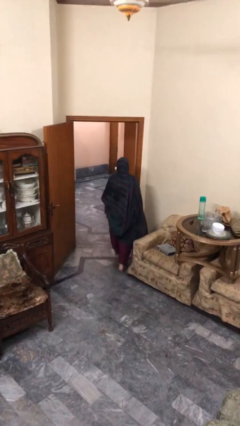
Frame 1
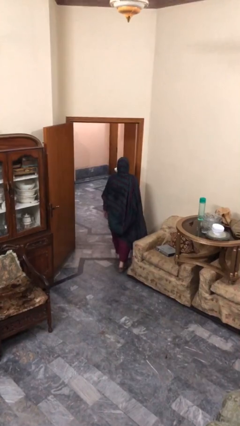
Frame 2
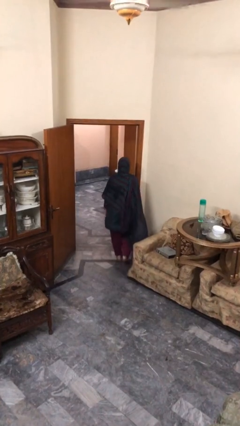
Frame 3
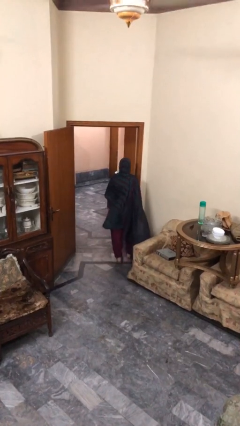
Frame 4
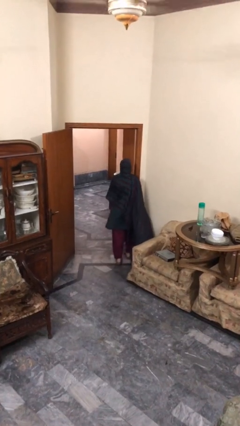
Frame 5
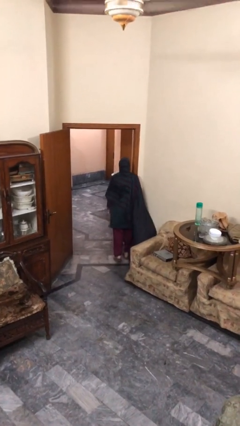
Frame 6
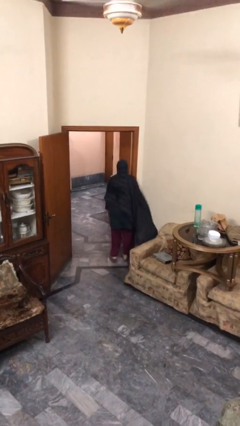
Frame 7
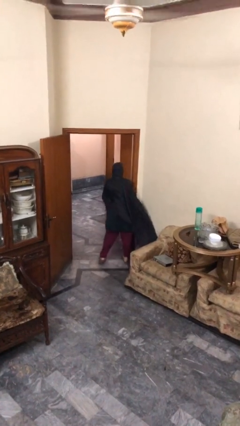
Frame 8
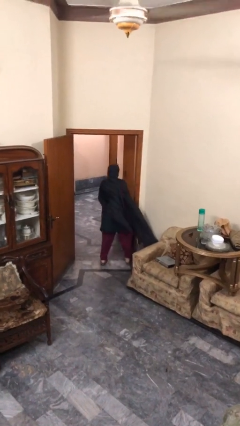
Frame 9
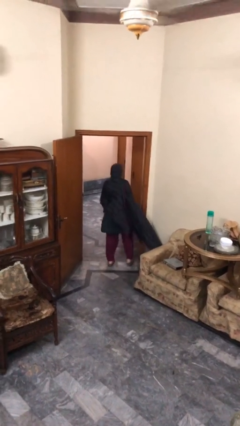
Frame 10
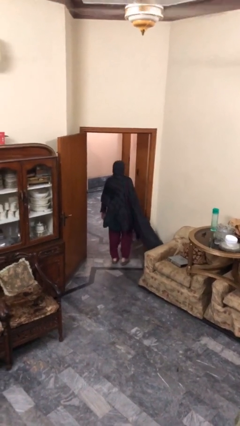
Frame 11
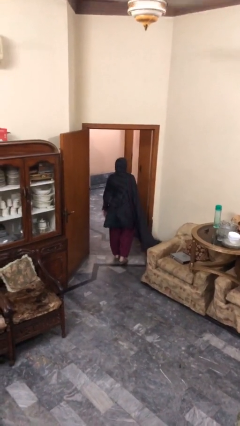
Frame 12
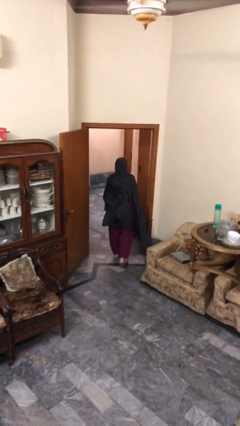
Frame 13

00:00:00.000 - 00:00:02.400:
person bumps into wall

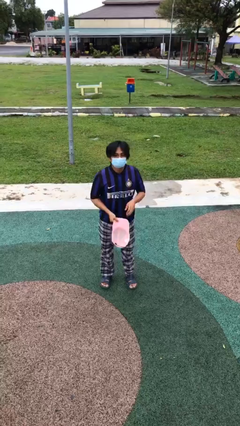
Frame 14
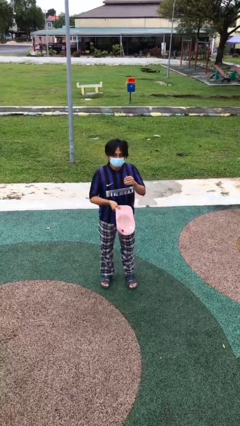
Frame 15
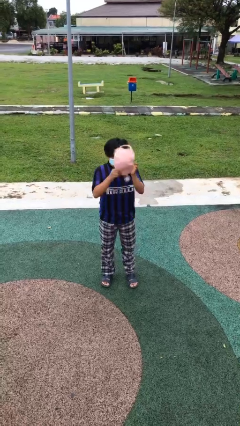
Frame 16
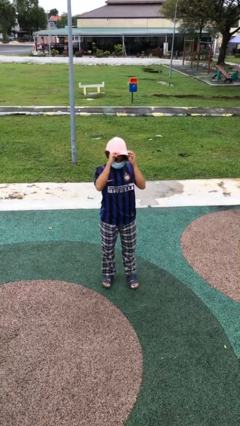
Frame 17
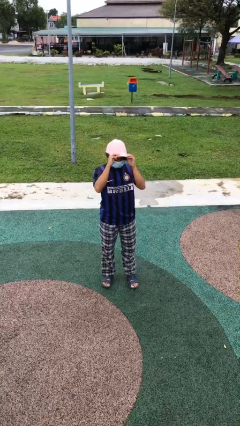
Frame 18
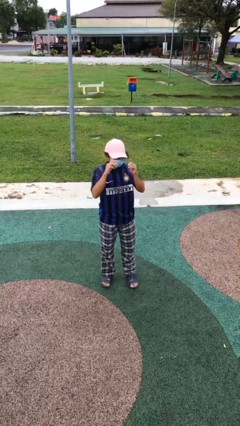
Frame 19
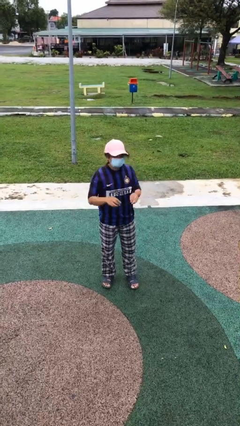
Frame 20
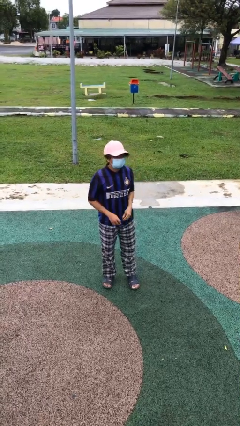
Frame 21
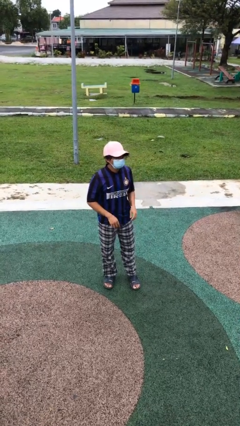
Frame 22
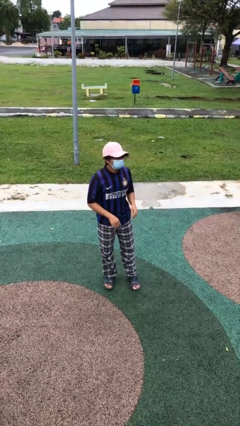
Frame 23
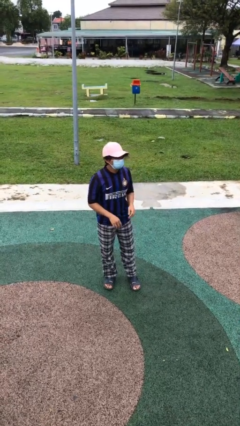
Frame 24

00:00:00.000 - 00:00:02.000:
person puts on hat

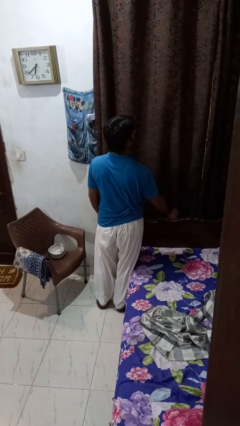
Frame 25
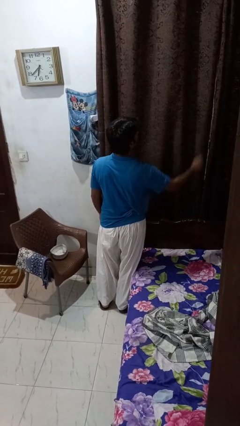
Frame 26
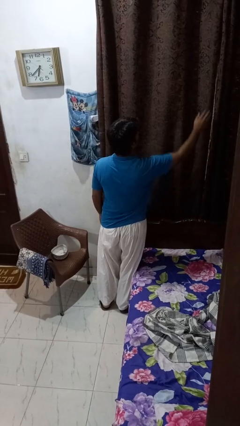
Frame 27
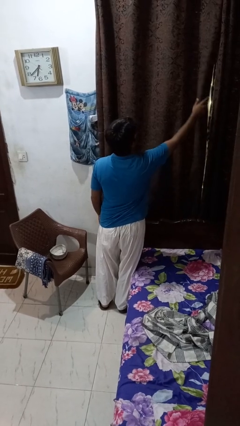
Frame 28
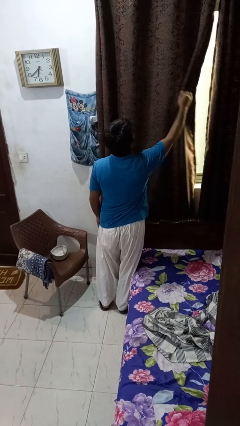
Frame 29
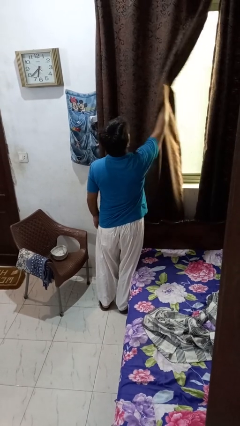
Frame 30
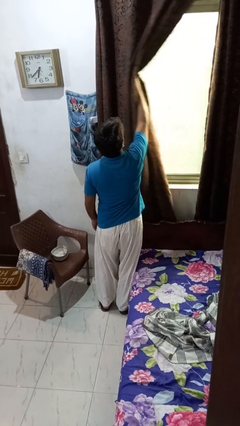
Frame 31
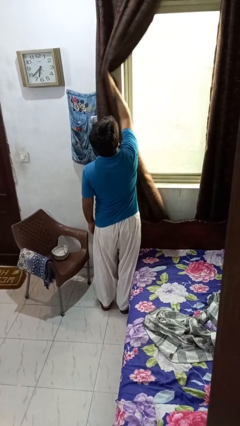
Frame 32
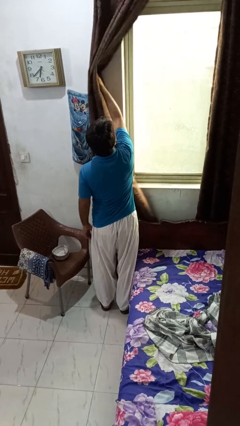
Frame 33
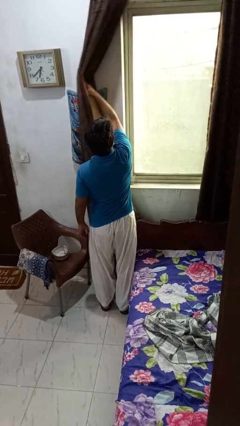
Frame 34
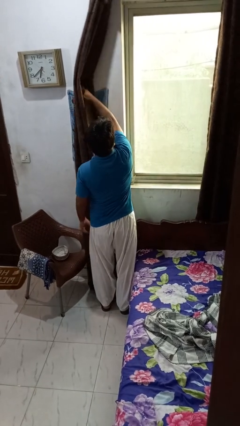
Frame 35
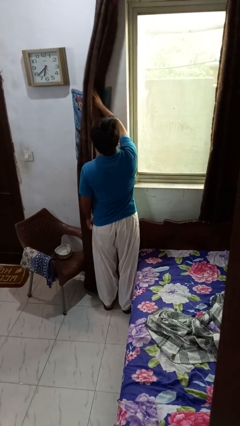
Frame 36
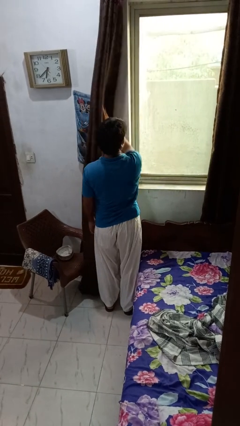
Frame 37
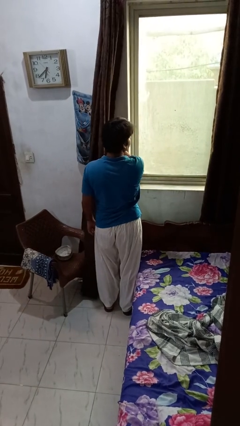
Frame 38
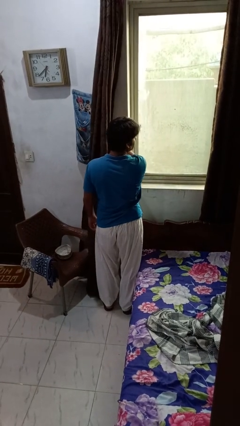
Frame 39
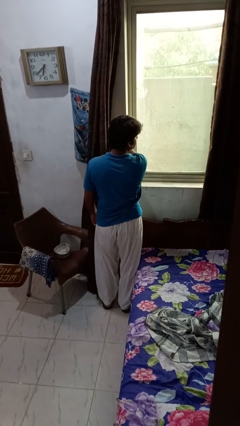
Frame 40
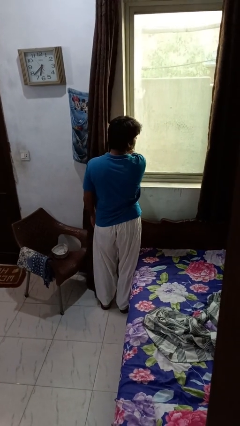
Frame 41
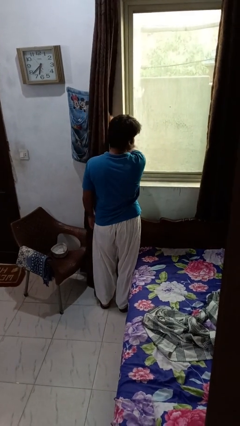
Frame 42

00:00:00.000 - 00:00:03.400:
person opens curtains

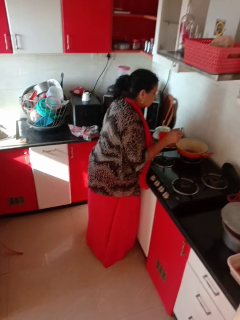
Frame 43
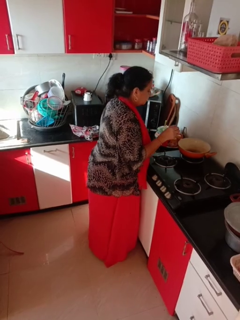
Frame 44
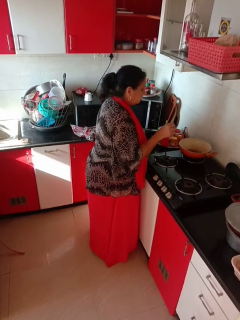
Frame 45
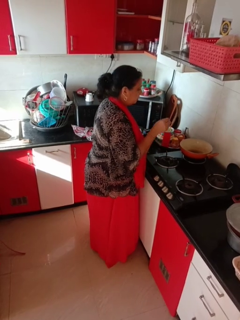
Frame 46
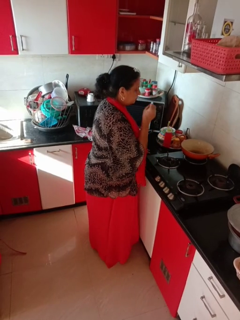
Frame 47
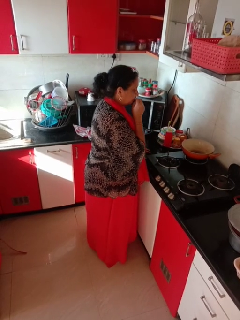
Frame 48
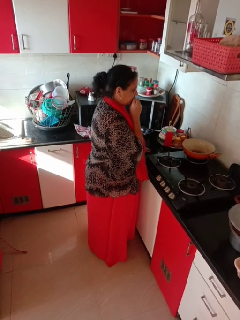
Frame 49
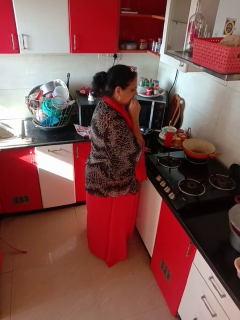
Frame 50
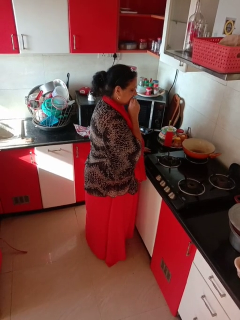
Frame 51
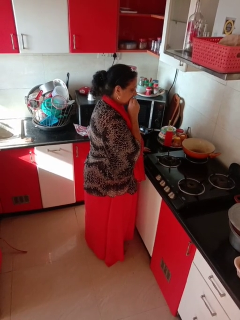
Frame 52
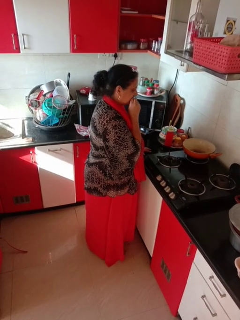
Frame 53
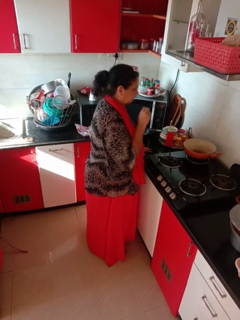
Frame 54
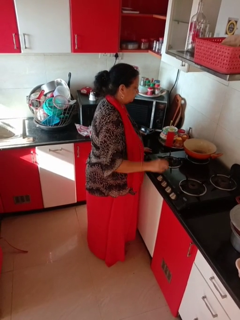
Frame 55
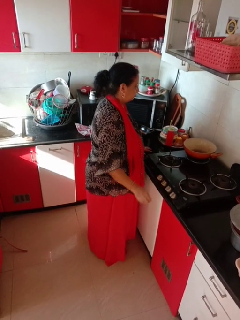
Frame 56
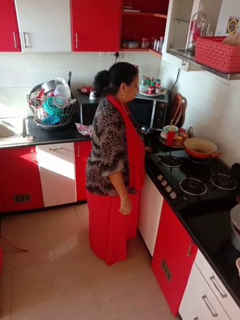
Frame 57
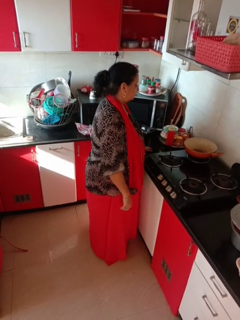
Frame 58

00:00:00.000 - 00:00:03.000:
person burns hand

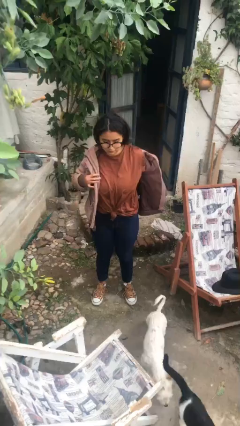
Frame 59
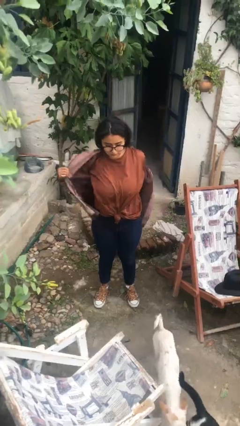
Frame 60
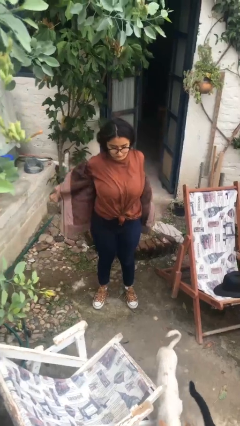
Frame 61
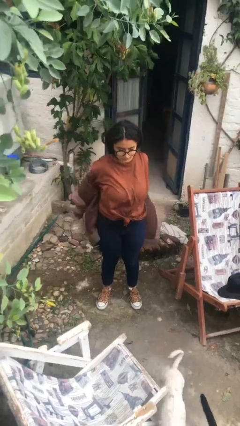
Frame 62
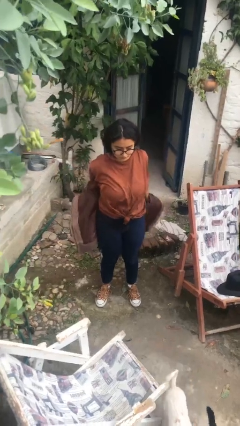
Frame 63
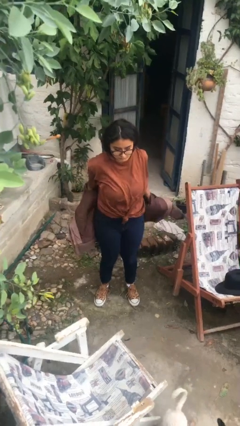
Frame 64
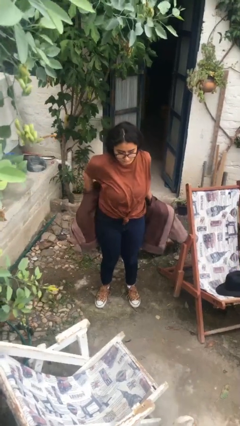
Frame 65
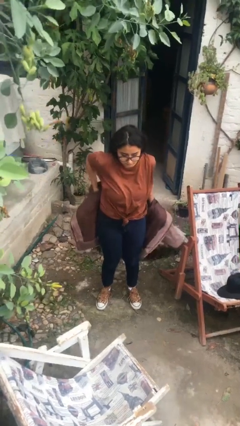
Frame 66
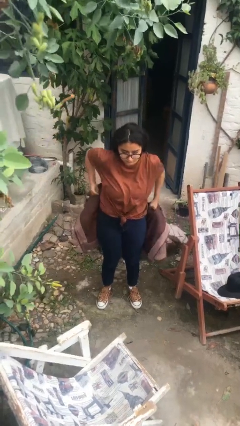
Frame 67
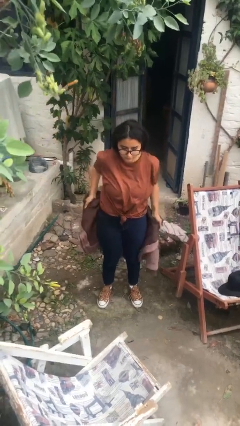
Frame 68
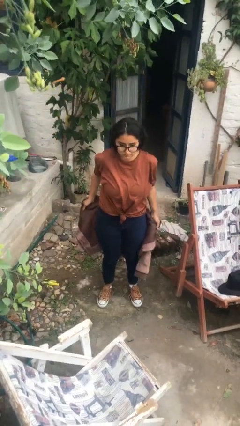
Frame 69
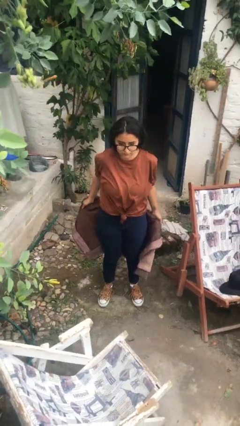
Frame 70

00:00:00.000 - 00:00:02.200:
person takes off jacket

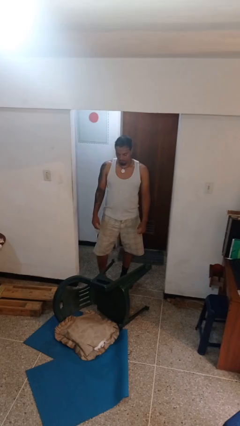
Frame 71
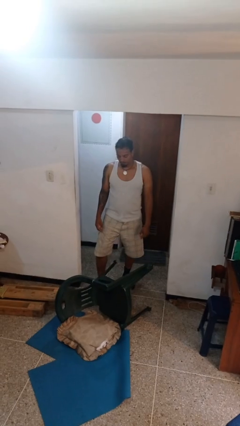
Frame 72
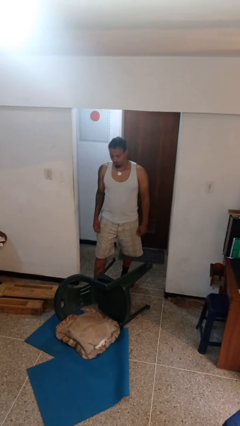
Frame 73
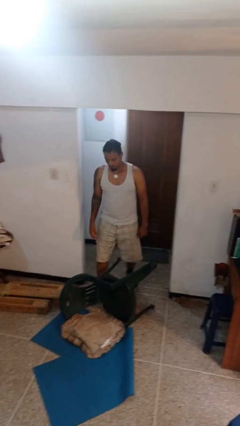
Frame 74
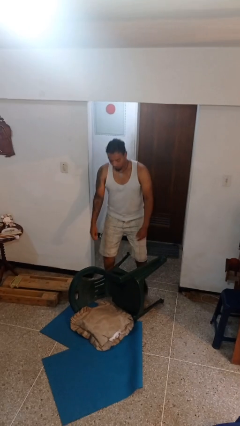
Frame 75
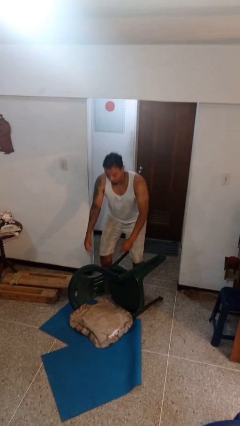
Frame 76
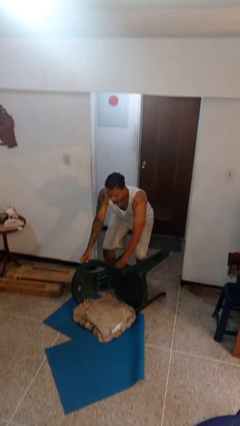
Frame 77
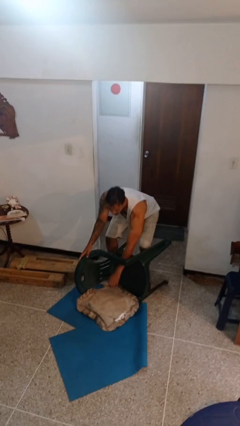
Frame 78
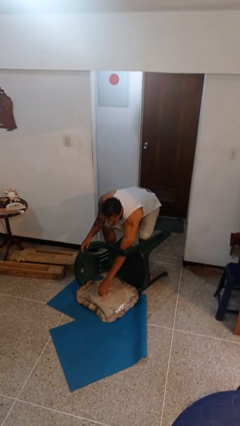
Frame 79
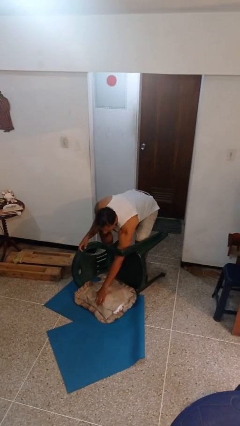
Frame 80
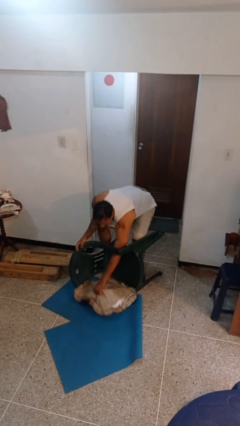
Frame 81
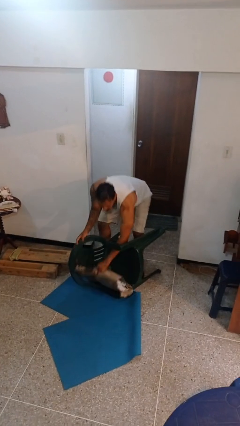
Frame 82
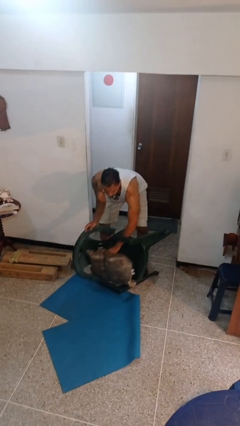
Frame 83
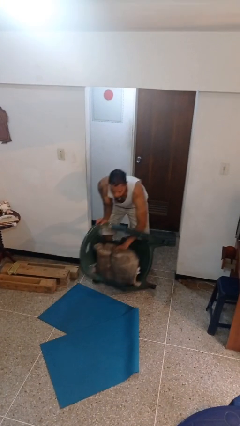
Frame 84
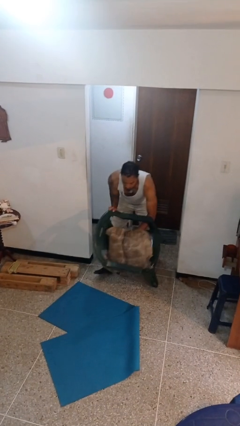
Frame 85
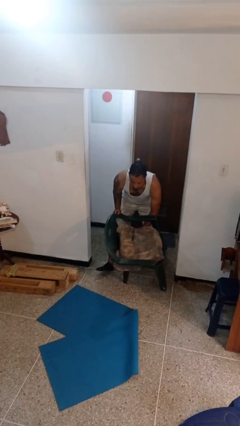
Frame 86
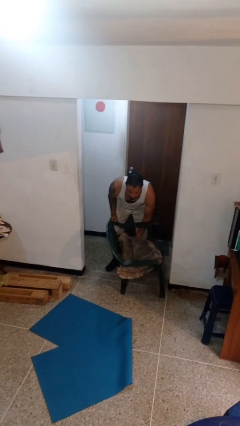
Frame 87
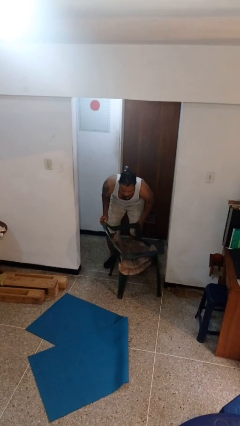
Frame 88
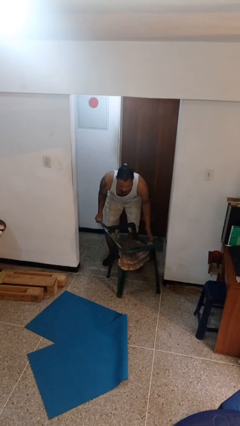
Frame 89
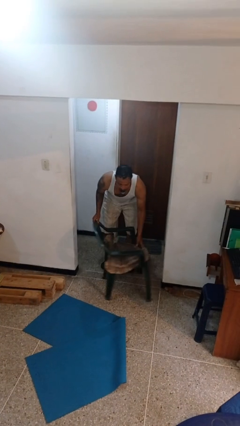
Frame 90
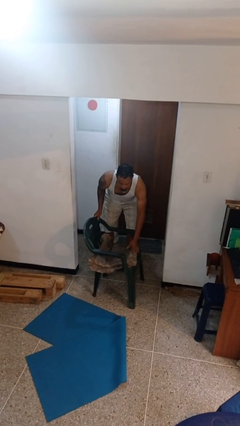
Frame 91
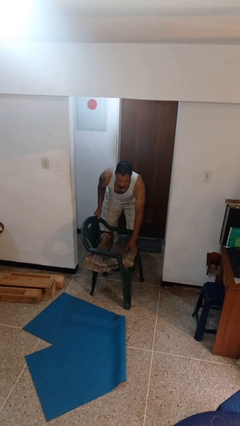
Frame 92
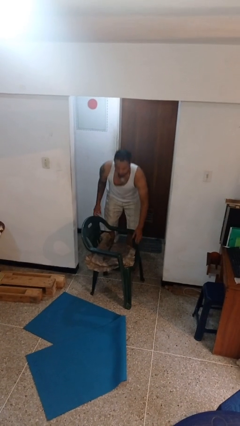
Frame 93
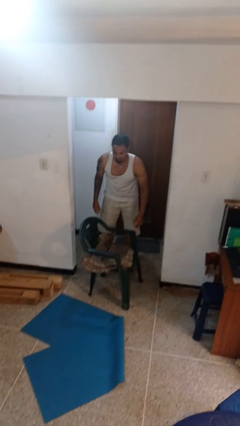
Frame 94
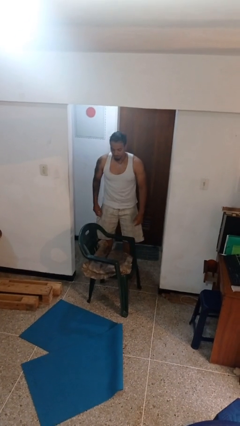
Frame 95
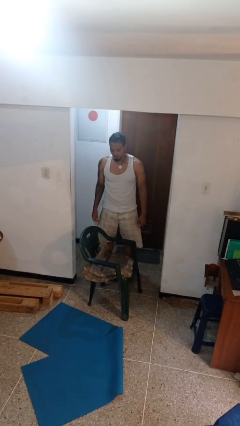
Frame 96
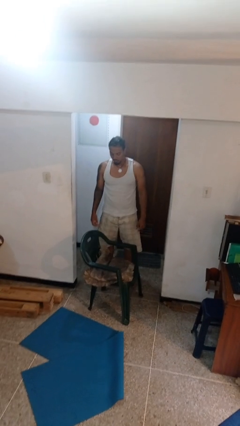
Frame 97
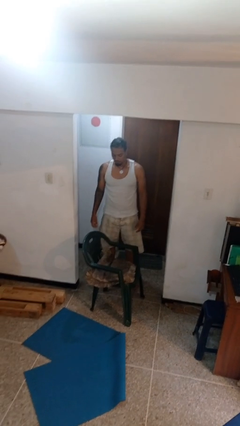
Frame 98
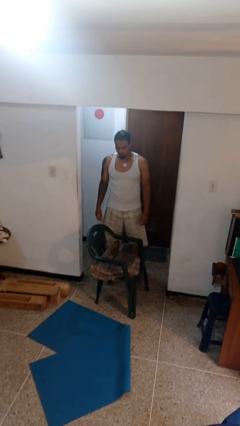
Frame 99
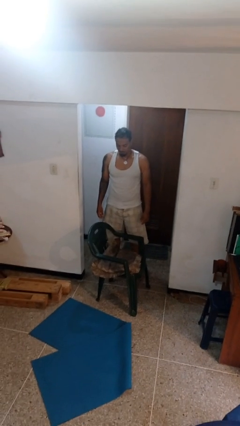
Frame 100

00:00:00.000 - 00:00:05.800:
person sets upright furniture
